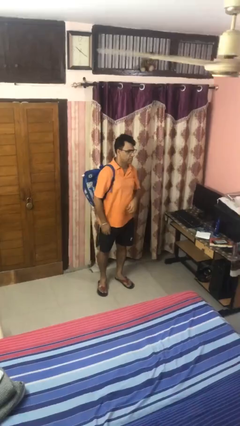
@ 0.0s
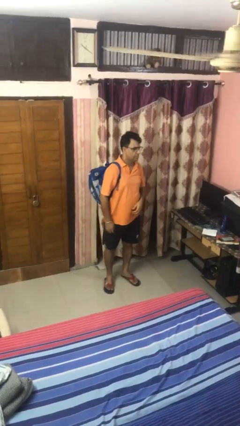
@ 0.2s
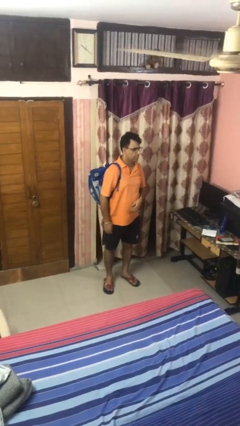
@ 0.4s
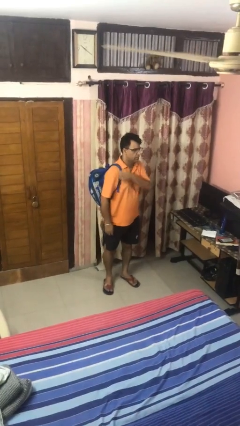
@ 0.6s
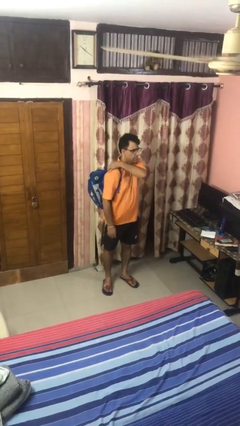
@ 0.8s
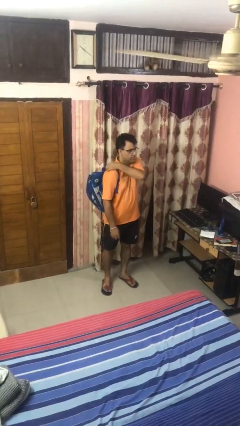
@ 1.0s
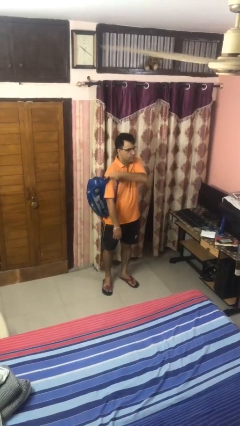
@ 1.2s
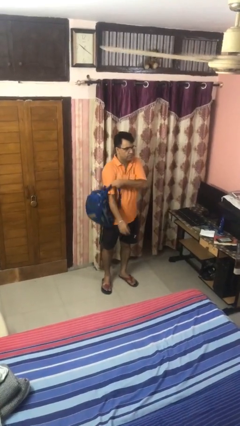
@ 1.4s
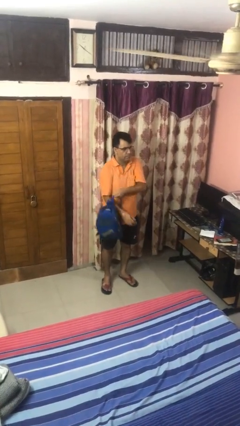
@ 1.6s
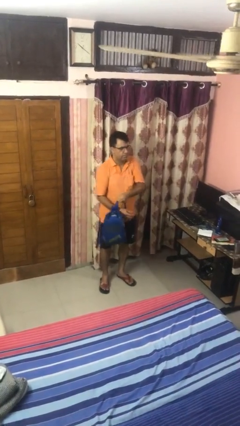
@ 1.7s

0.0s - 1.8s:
person takes off backpack

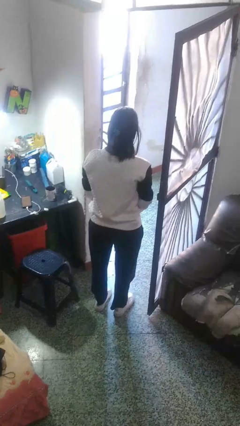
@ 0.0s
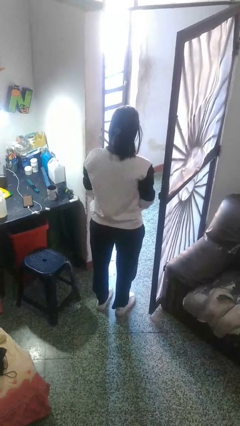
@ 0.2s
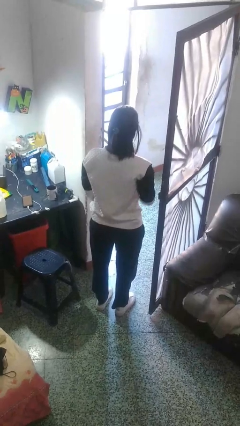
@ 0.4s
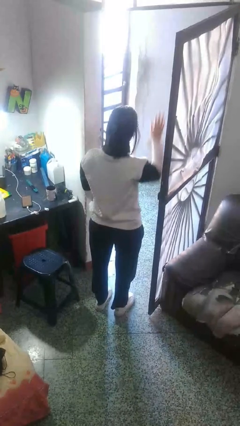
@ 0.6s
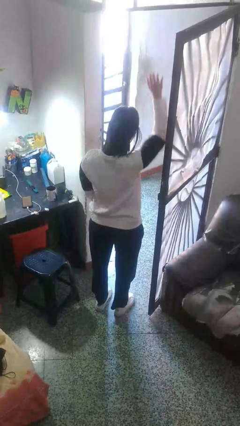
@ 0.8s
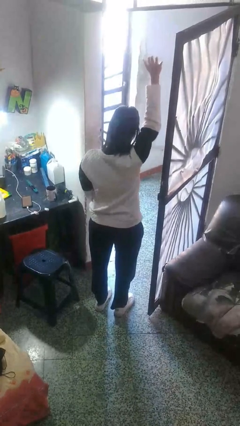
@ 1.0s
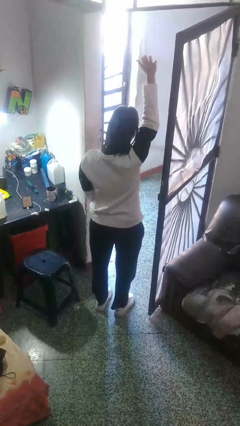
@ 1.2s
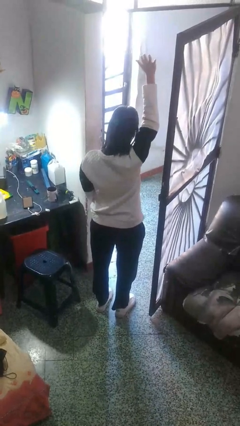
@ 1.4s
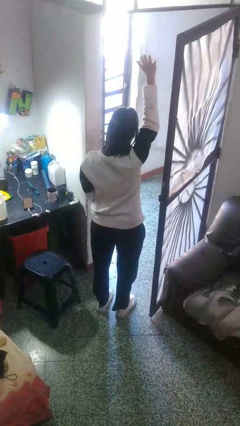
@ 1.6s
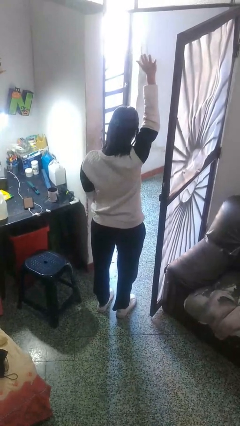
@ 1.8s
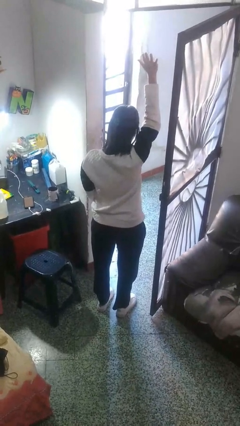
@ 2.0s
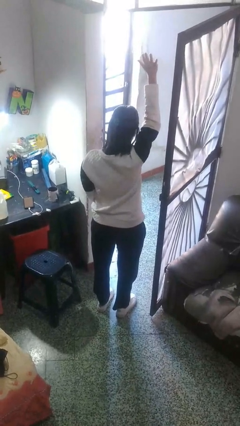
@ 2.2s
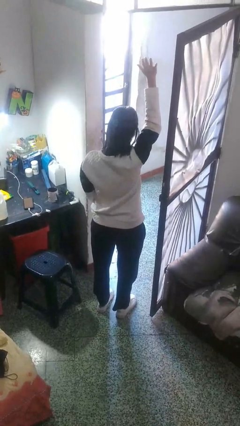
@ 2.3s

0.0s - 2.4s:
person gestures raise hand

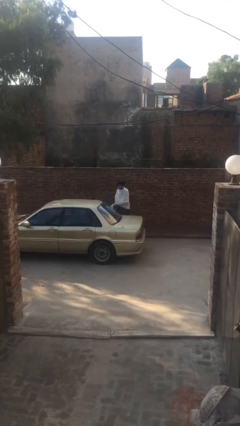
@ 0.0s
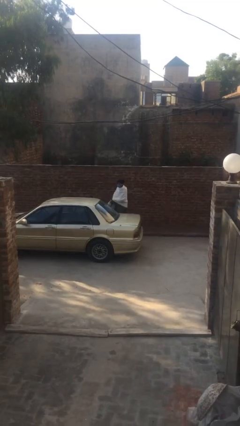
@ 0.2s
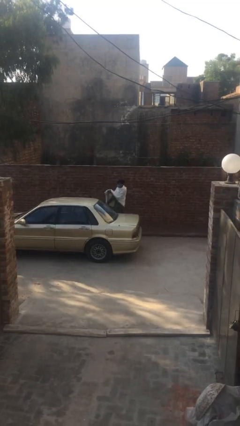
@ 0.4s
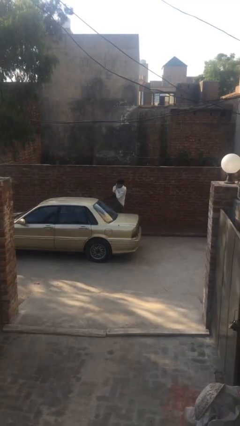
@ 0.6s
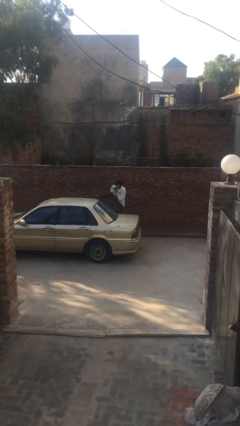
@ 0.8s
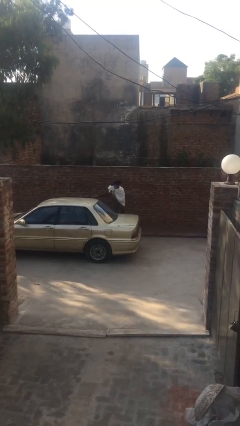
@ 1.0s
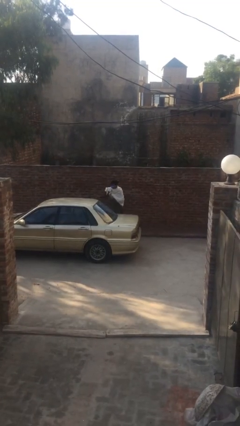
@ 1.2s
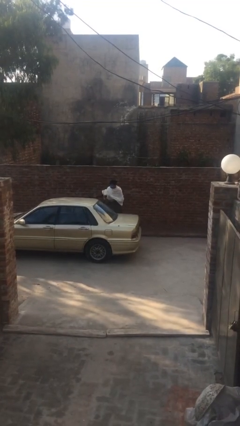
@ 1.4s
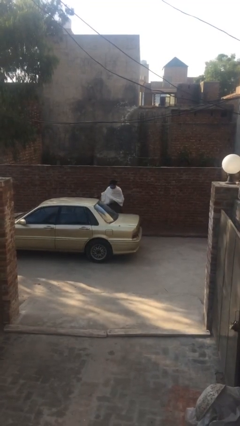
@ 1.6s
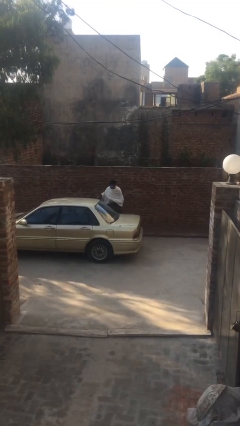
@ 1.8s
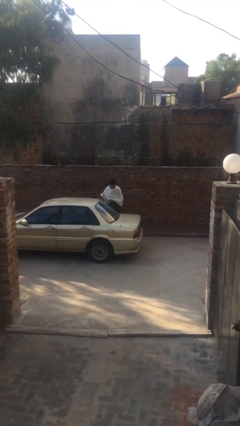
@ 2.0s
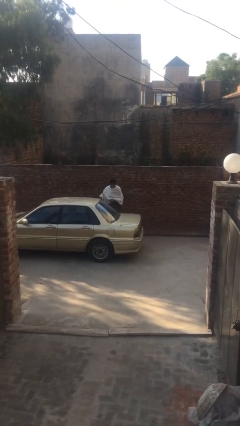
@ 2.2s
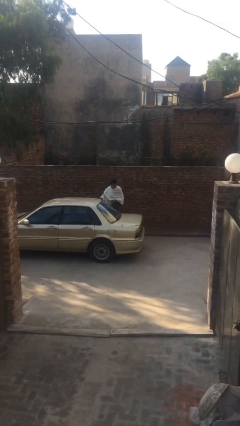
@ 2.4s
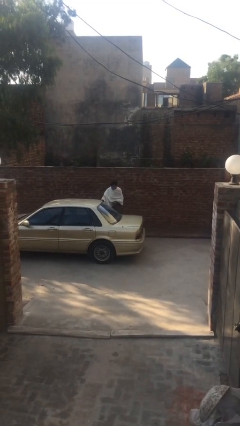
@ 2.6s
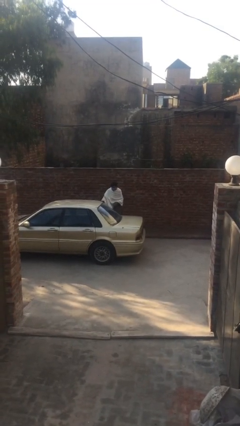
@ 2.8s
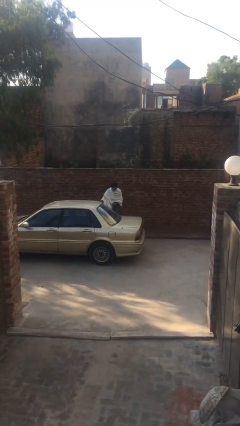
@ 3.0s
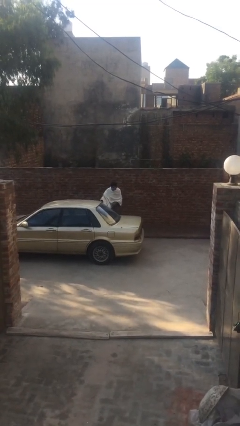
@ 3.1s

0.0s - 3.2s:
person closes car door

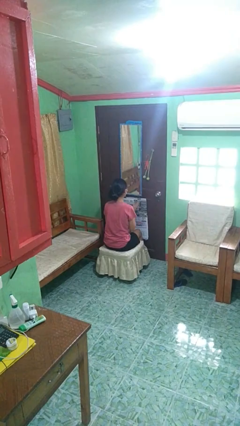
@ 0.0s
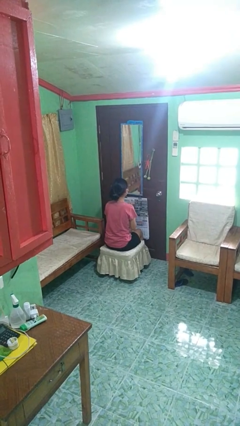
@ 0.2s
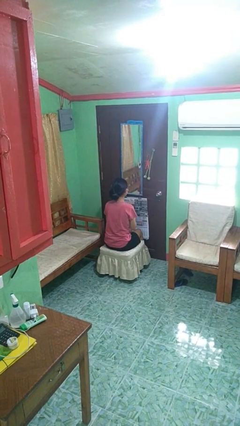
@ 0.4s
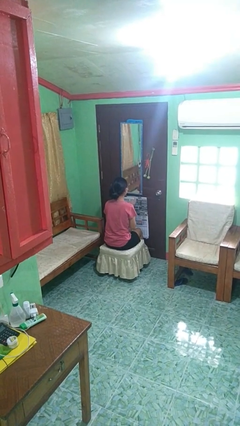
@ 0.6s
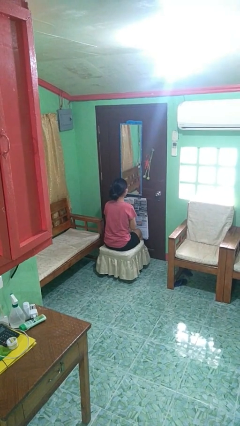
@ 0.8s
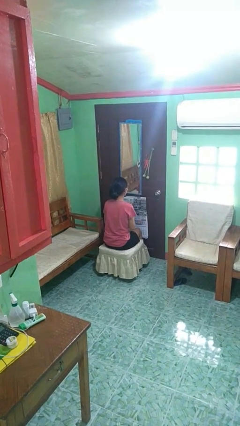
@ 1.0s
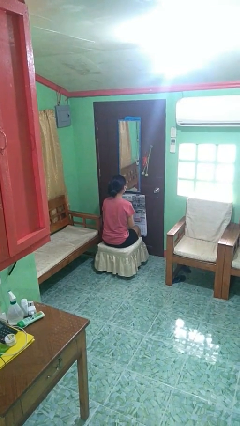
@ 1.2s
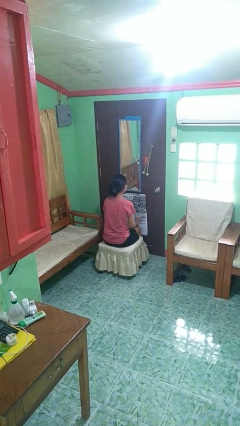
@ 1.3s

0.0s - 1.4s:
person claps hands

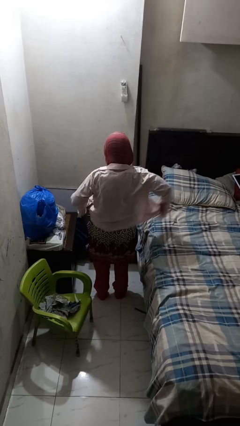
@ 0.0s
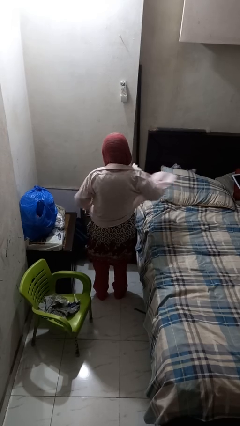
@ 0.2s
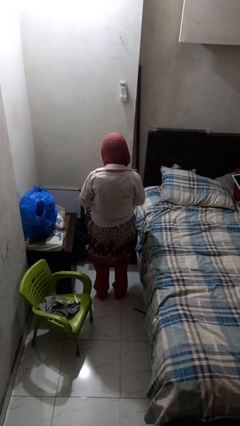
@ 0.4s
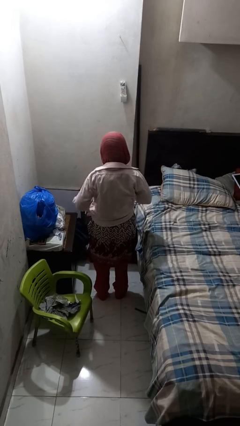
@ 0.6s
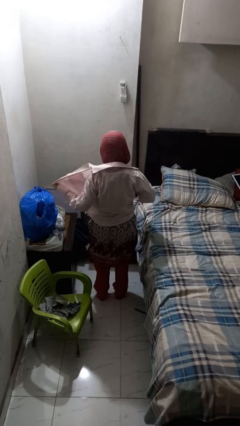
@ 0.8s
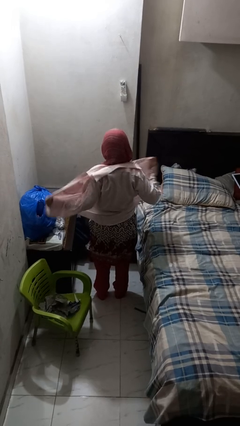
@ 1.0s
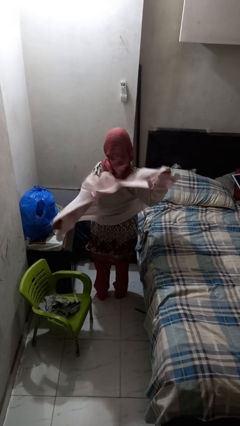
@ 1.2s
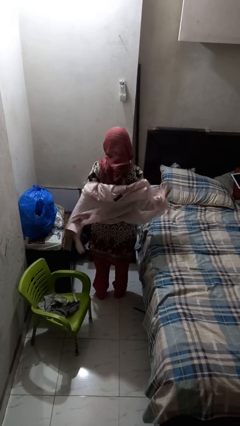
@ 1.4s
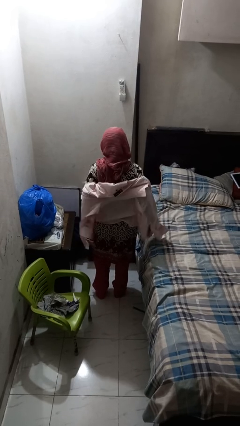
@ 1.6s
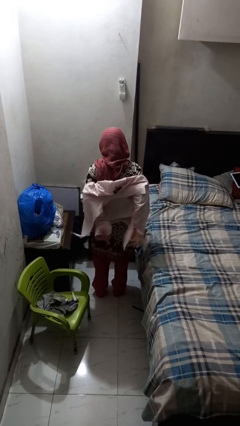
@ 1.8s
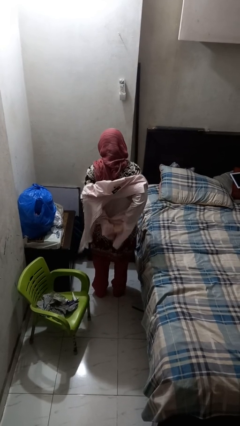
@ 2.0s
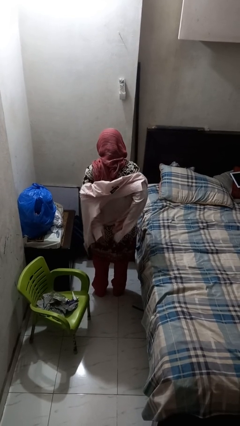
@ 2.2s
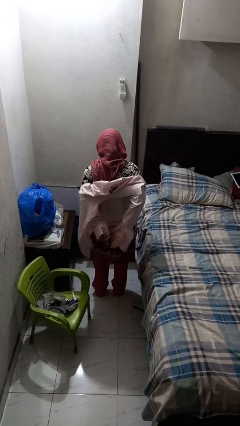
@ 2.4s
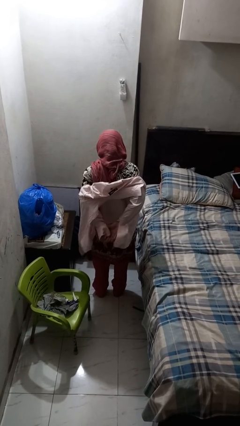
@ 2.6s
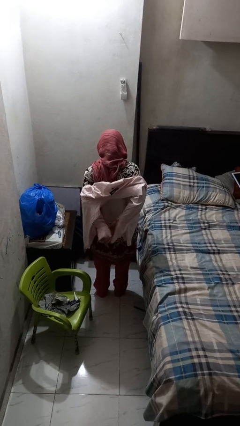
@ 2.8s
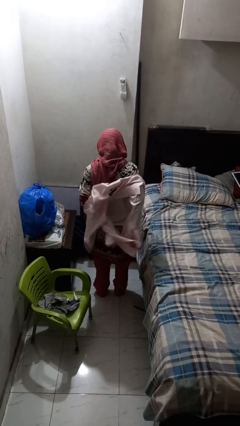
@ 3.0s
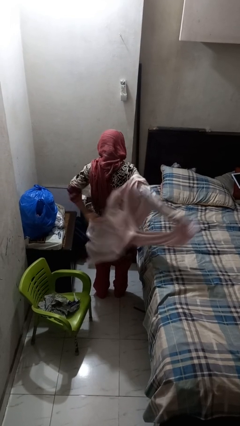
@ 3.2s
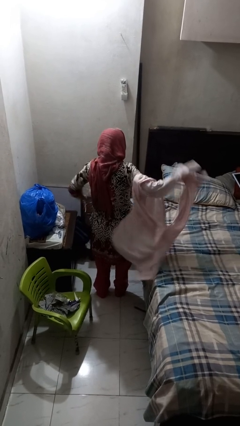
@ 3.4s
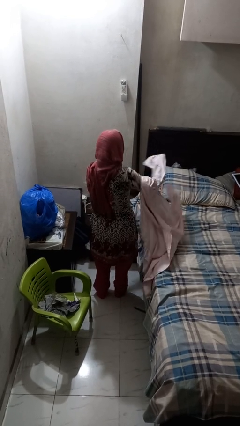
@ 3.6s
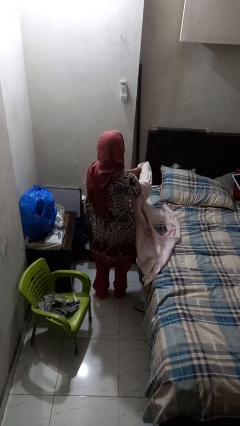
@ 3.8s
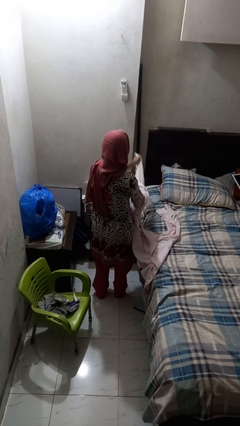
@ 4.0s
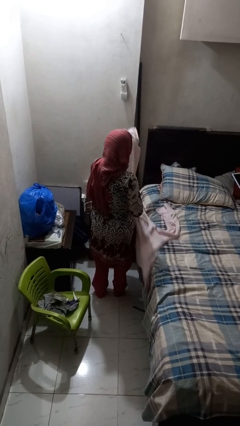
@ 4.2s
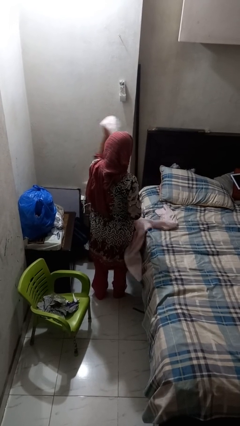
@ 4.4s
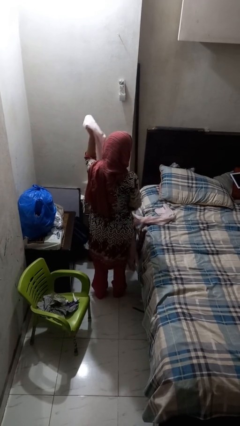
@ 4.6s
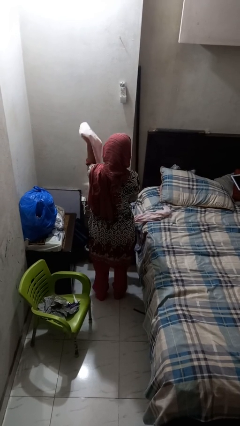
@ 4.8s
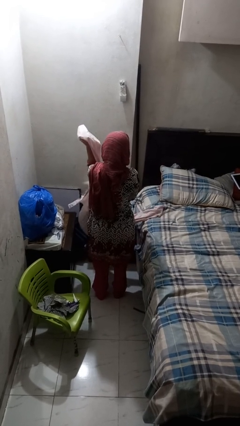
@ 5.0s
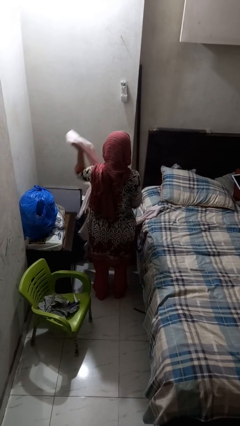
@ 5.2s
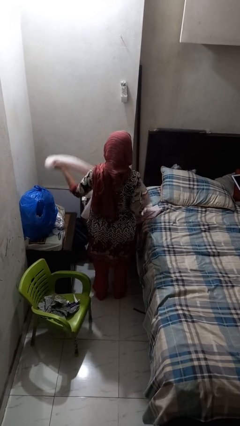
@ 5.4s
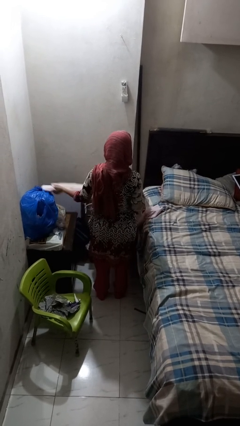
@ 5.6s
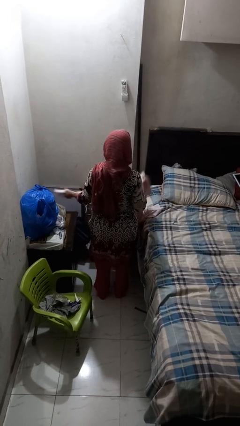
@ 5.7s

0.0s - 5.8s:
person takes off shirt

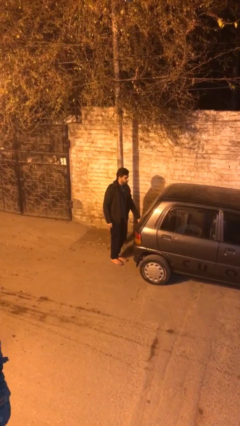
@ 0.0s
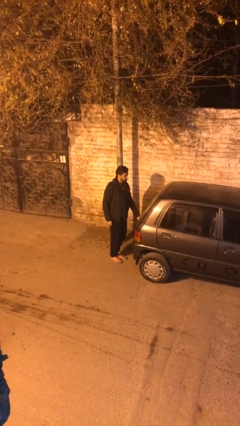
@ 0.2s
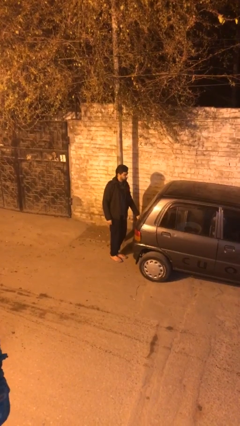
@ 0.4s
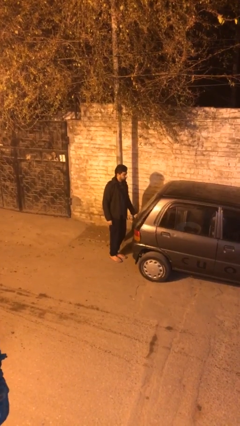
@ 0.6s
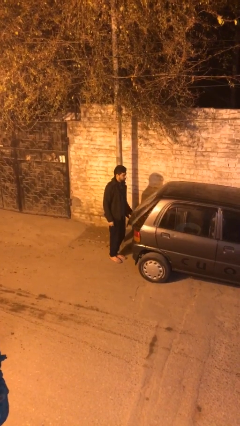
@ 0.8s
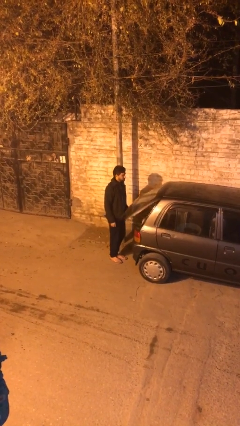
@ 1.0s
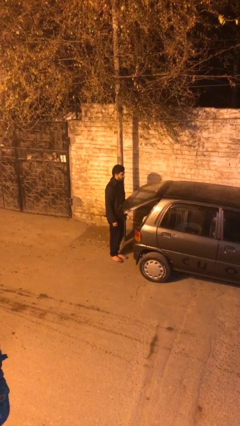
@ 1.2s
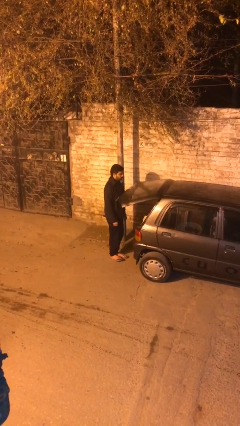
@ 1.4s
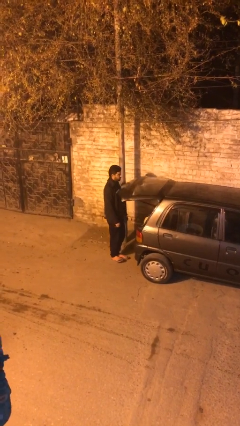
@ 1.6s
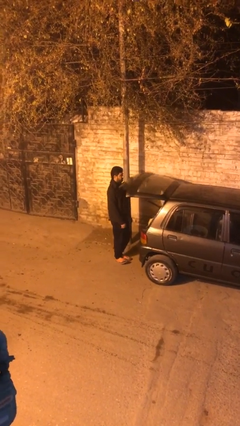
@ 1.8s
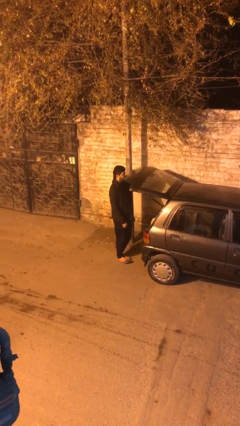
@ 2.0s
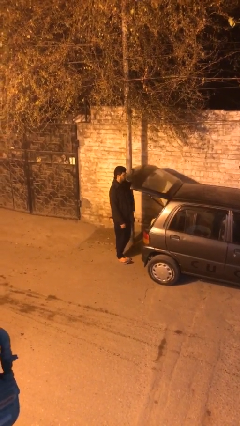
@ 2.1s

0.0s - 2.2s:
person opens car trunk

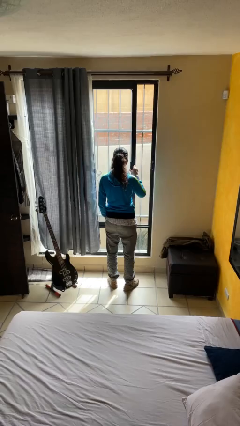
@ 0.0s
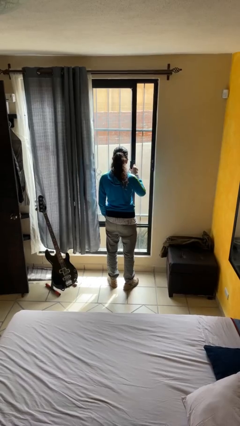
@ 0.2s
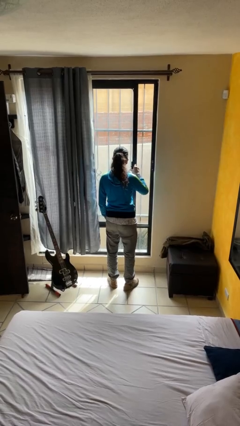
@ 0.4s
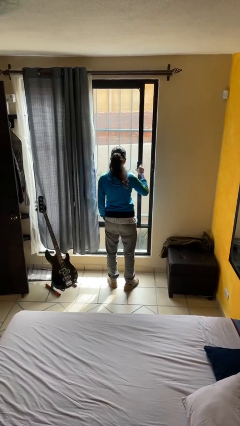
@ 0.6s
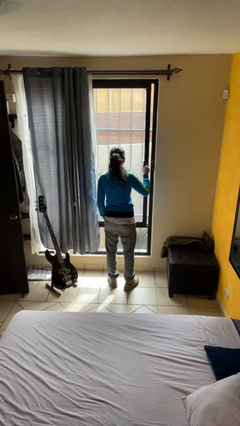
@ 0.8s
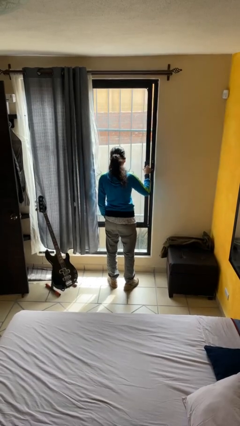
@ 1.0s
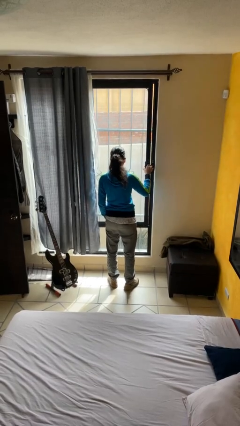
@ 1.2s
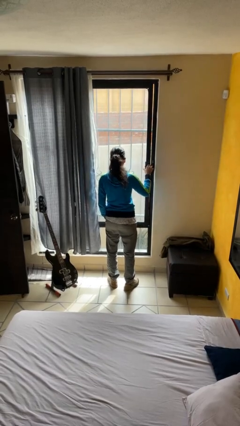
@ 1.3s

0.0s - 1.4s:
person closes home window
